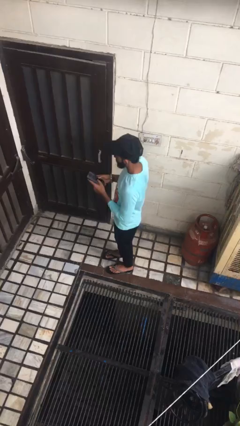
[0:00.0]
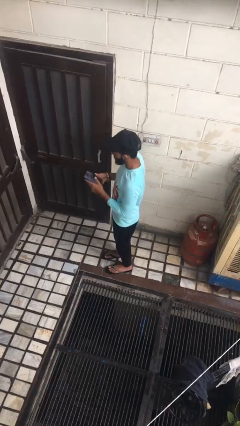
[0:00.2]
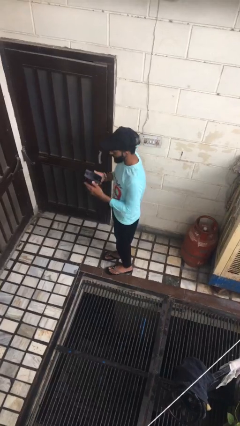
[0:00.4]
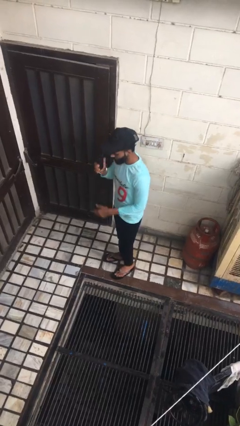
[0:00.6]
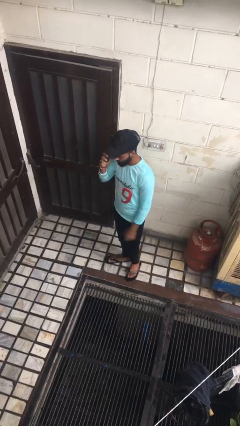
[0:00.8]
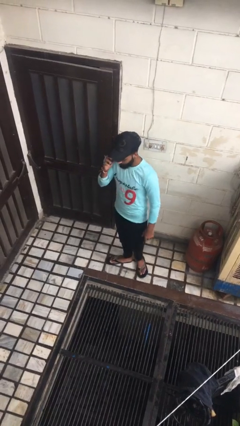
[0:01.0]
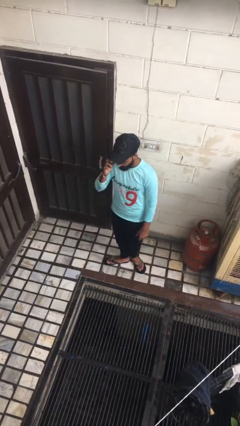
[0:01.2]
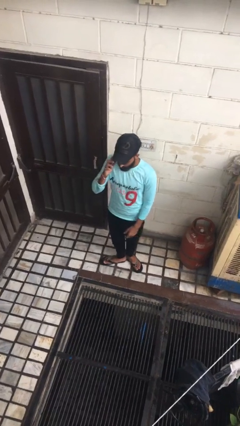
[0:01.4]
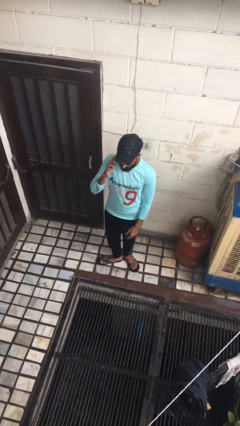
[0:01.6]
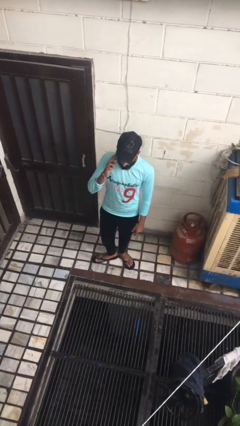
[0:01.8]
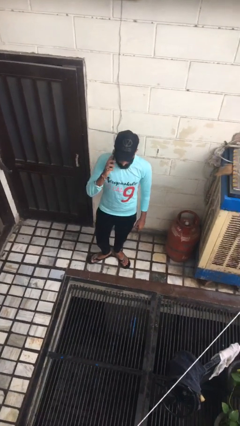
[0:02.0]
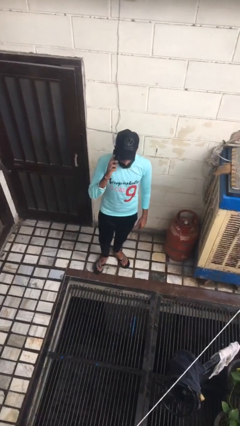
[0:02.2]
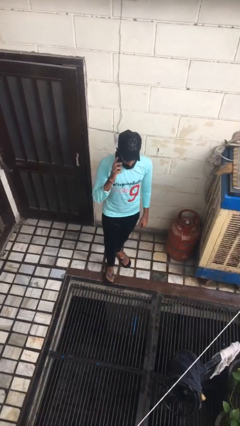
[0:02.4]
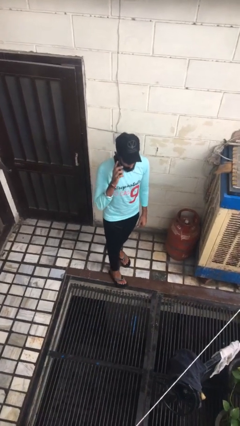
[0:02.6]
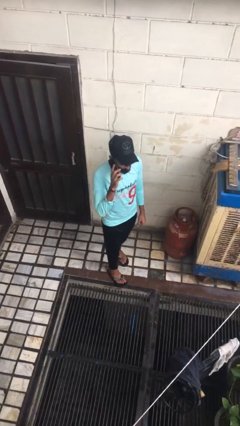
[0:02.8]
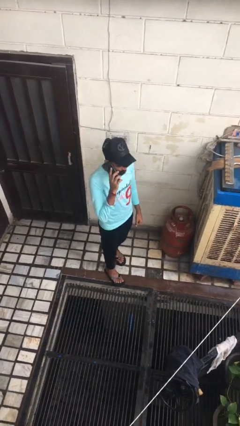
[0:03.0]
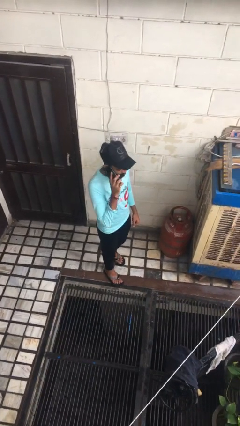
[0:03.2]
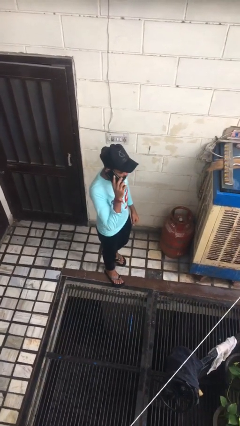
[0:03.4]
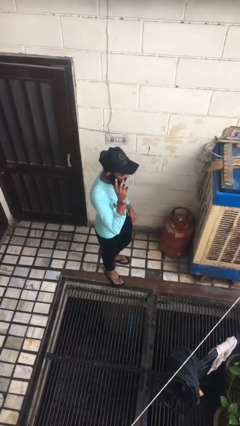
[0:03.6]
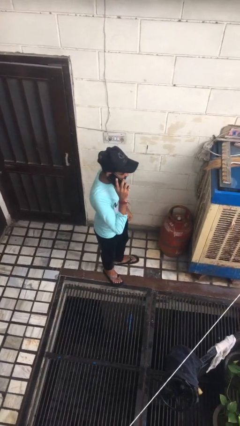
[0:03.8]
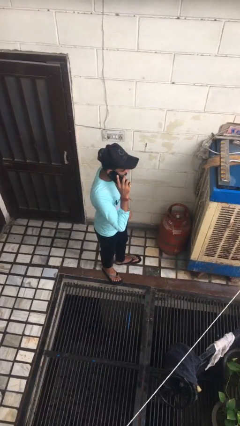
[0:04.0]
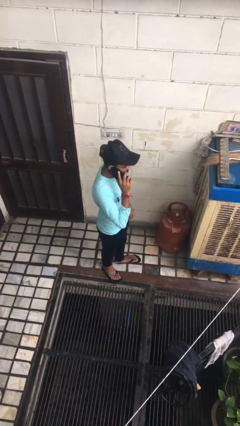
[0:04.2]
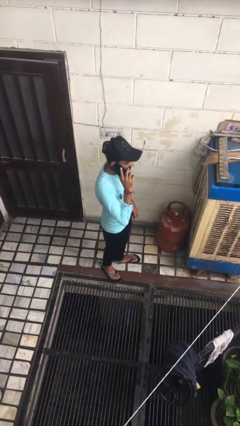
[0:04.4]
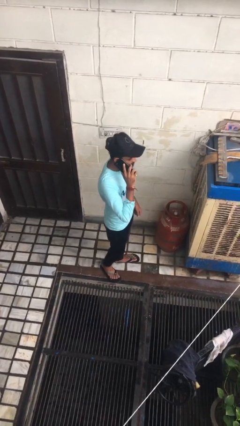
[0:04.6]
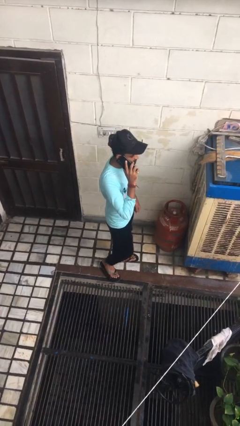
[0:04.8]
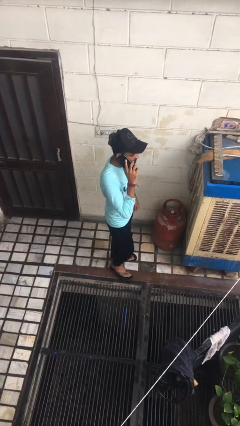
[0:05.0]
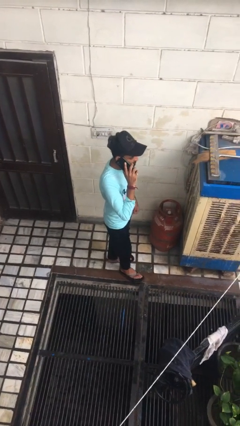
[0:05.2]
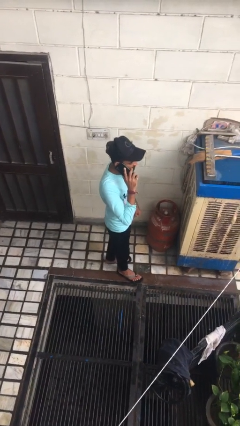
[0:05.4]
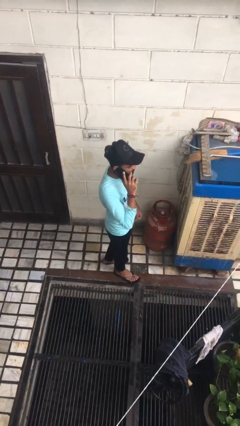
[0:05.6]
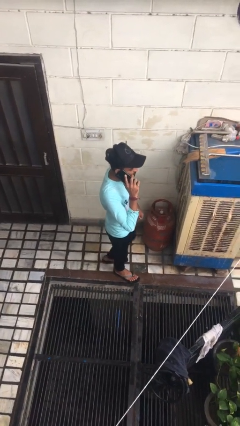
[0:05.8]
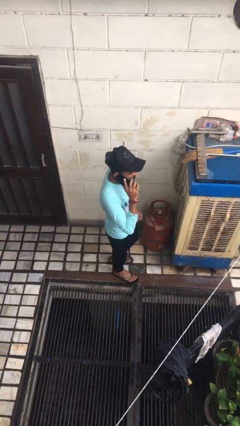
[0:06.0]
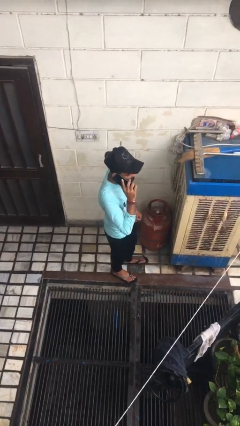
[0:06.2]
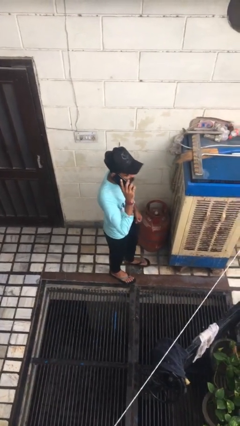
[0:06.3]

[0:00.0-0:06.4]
person talks on phone

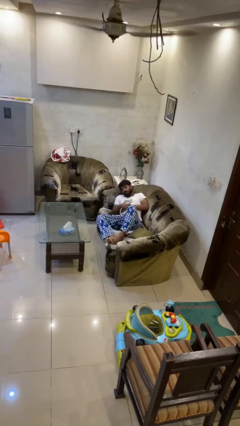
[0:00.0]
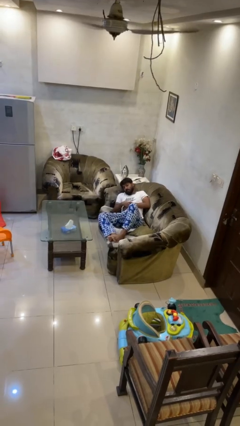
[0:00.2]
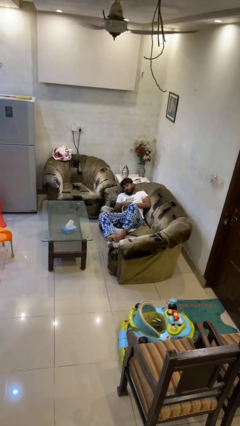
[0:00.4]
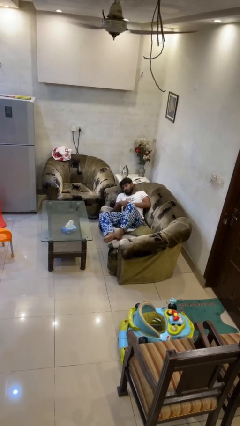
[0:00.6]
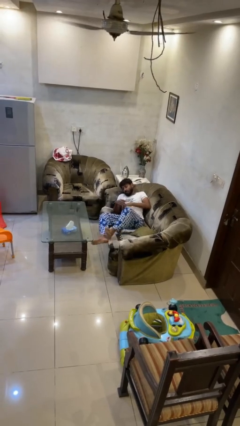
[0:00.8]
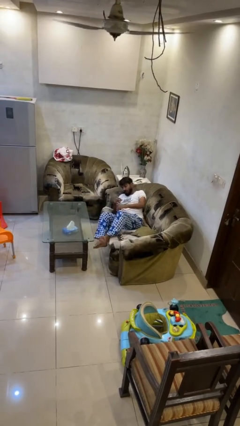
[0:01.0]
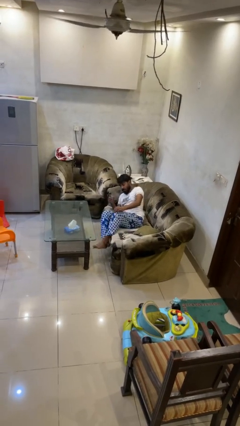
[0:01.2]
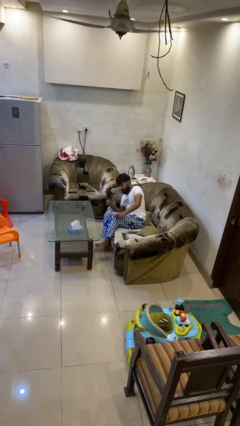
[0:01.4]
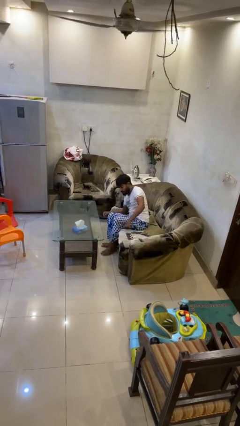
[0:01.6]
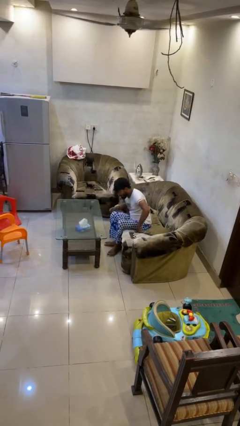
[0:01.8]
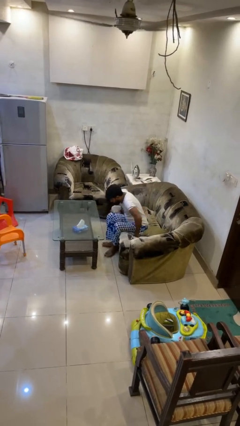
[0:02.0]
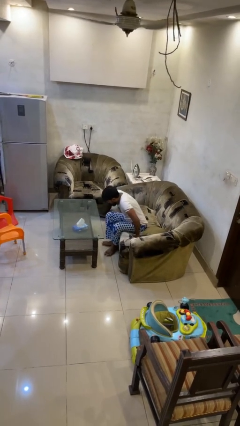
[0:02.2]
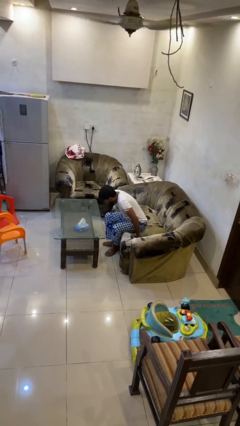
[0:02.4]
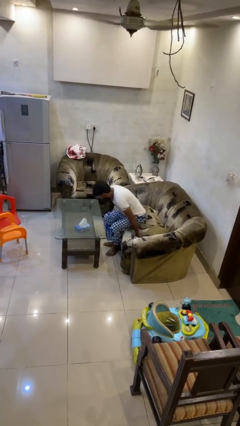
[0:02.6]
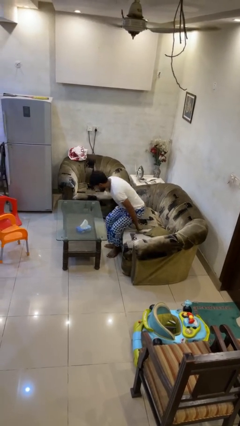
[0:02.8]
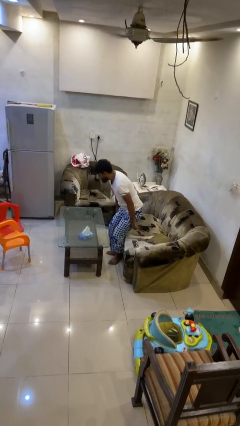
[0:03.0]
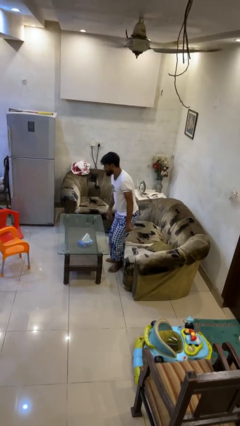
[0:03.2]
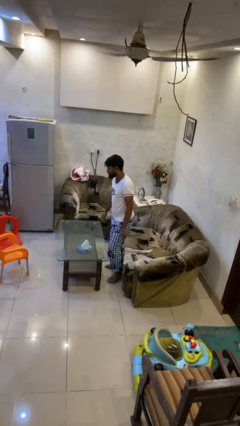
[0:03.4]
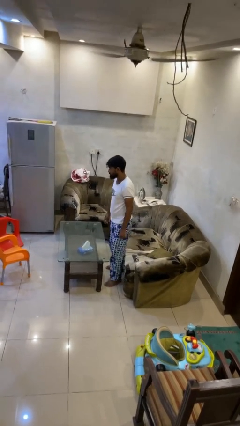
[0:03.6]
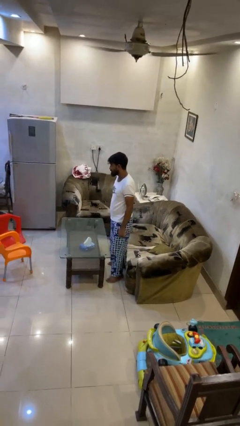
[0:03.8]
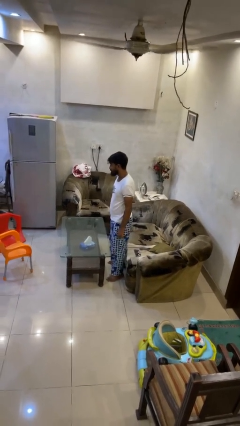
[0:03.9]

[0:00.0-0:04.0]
person stands up

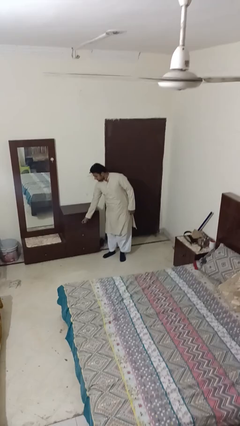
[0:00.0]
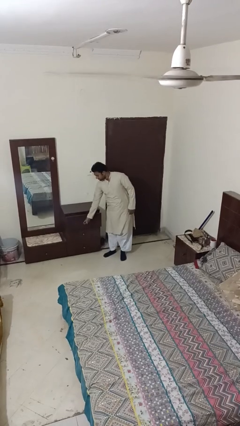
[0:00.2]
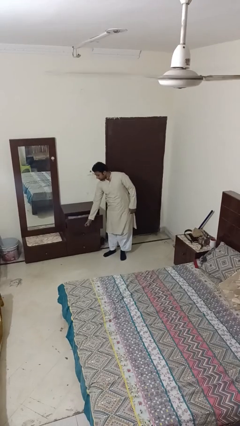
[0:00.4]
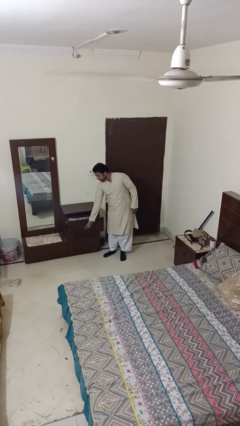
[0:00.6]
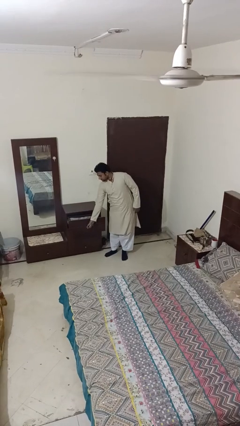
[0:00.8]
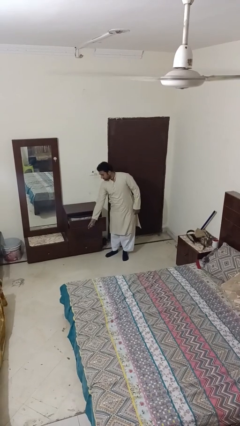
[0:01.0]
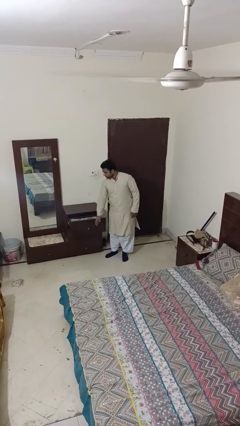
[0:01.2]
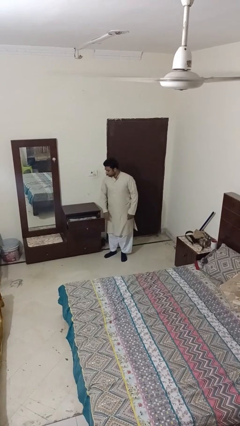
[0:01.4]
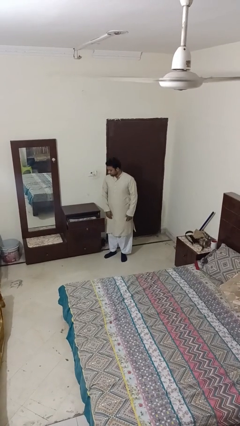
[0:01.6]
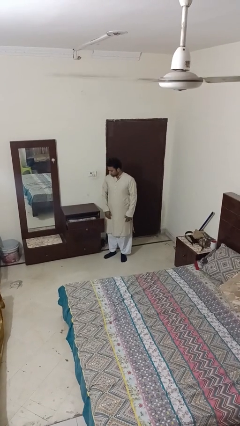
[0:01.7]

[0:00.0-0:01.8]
person opens dresser drawer

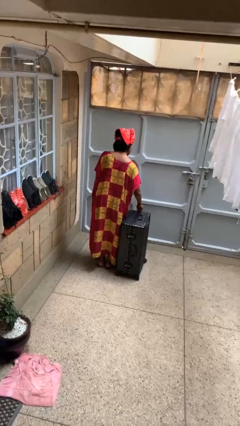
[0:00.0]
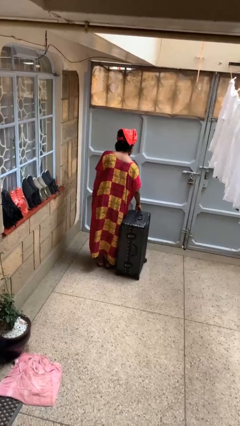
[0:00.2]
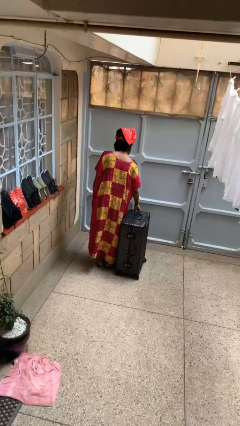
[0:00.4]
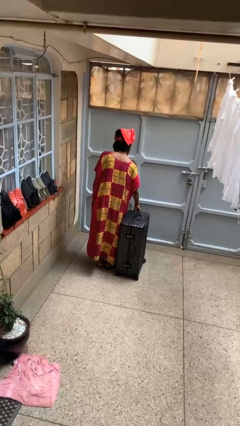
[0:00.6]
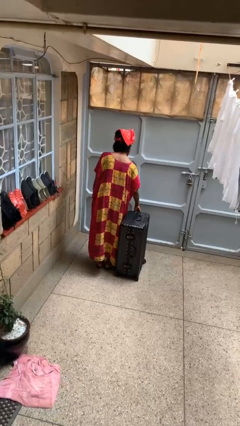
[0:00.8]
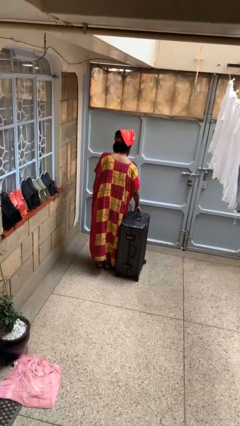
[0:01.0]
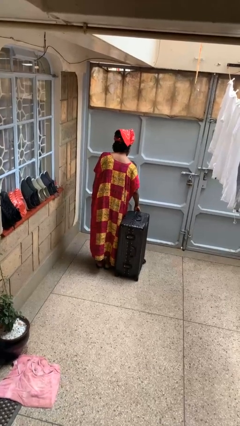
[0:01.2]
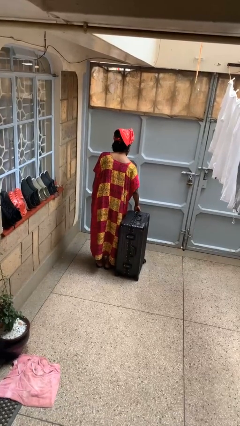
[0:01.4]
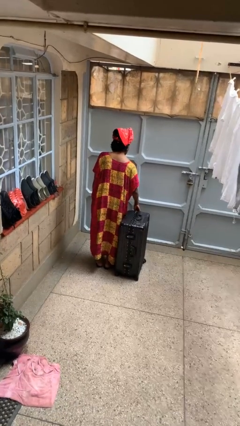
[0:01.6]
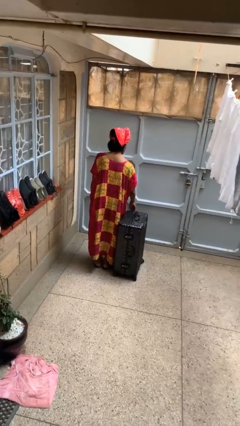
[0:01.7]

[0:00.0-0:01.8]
person closes suitcase

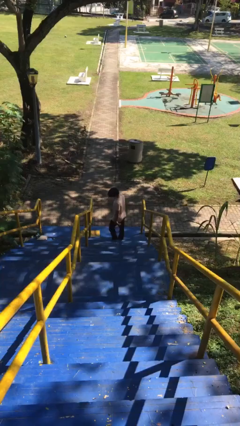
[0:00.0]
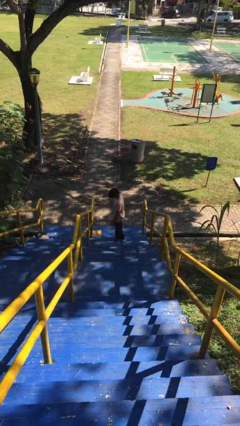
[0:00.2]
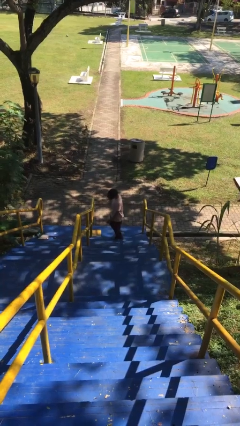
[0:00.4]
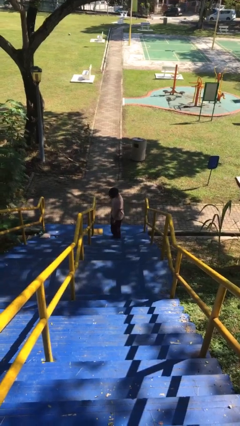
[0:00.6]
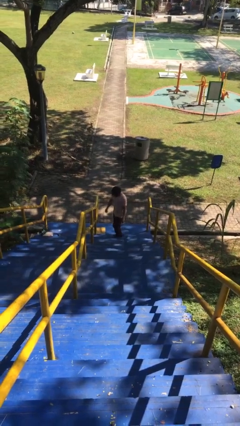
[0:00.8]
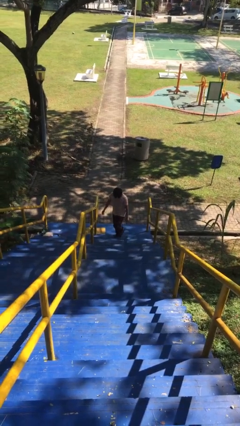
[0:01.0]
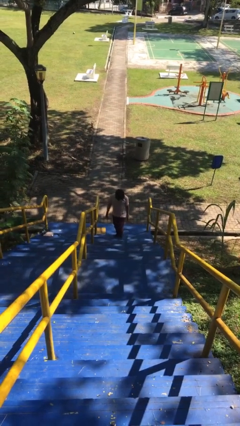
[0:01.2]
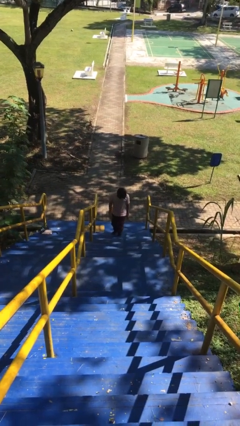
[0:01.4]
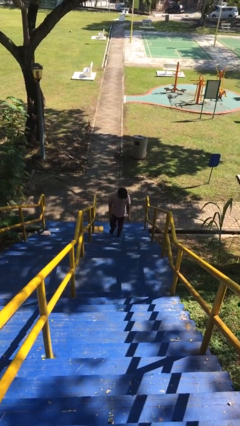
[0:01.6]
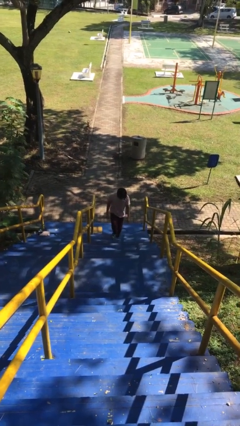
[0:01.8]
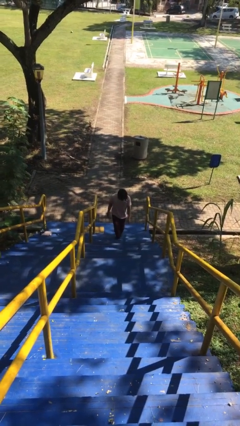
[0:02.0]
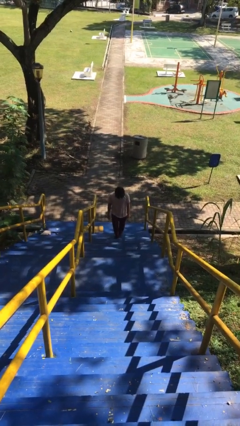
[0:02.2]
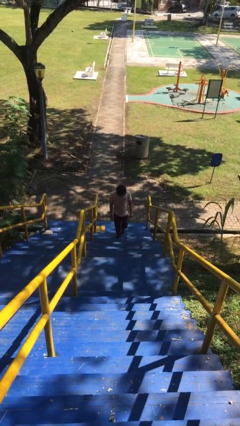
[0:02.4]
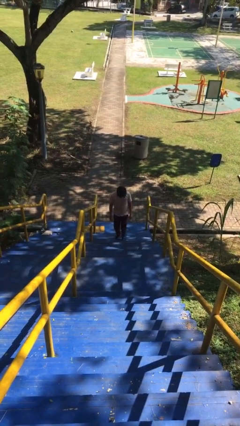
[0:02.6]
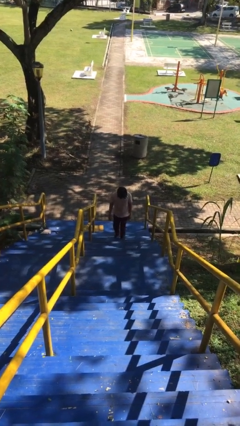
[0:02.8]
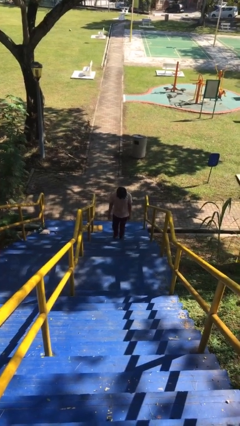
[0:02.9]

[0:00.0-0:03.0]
person climbs up stairs

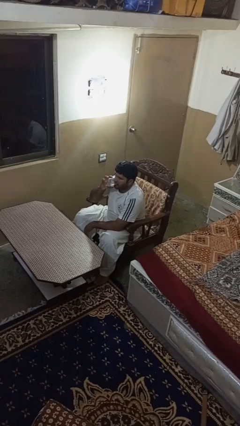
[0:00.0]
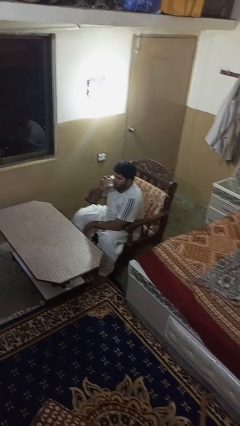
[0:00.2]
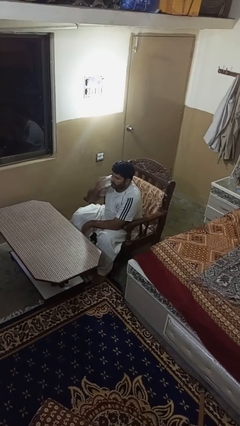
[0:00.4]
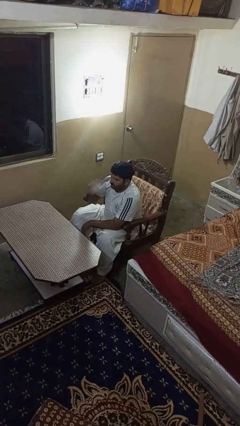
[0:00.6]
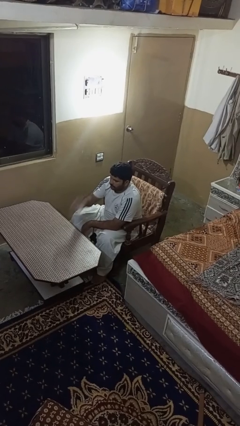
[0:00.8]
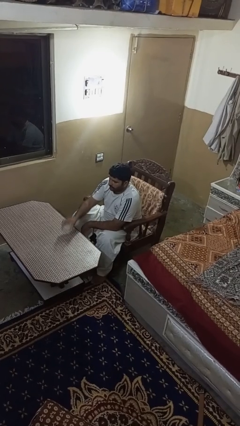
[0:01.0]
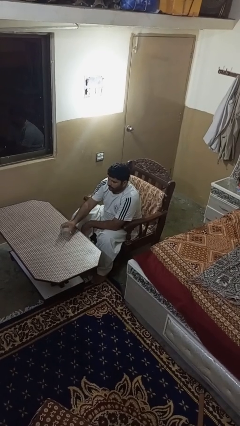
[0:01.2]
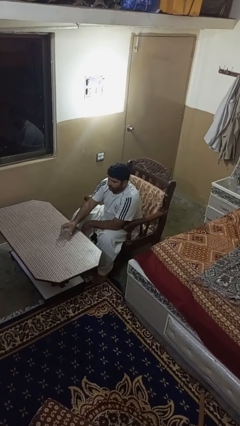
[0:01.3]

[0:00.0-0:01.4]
person puts down object on table
